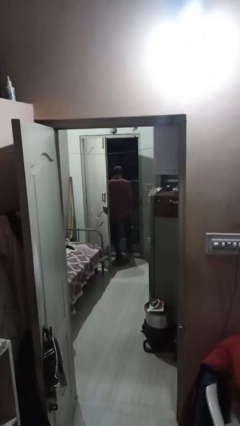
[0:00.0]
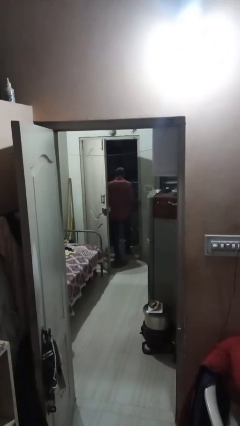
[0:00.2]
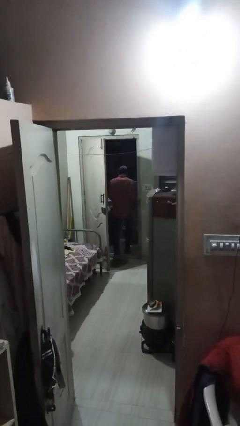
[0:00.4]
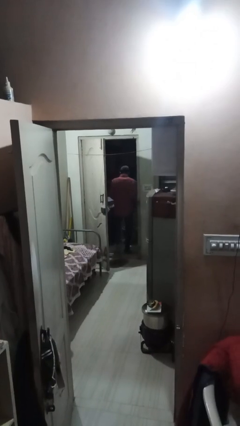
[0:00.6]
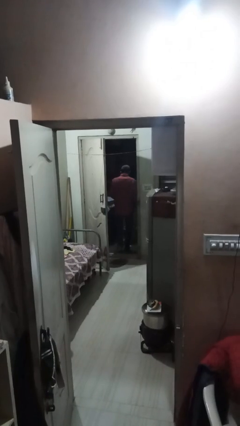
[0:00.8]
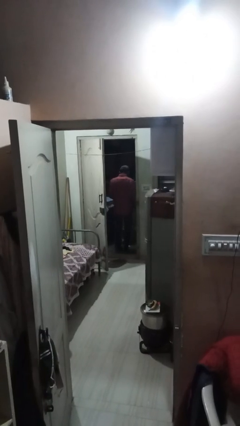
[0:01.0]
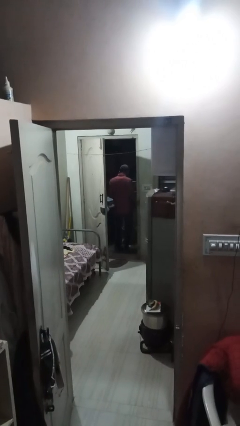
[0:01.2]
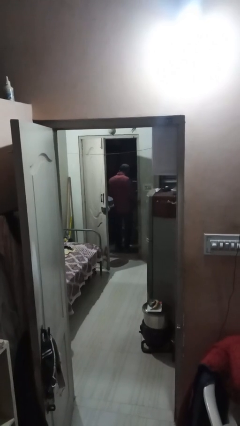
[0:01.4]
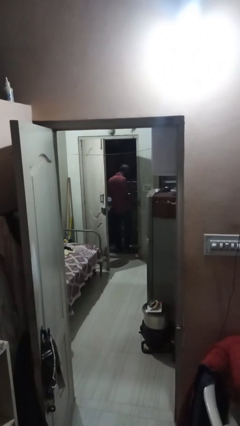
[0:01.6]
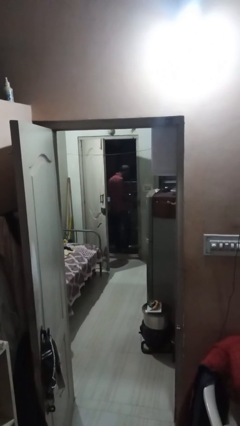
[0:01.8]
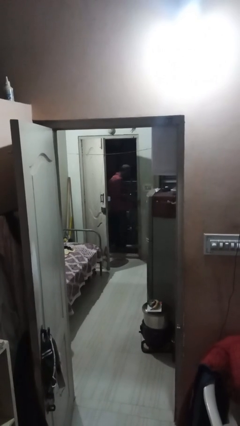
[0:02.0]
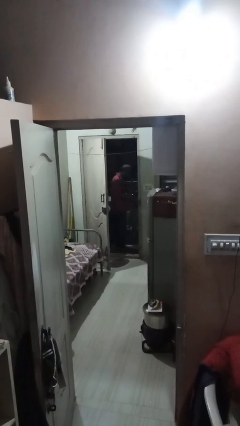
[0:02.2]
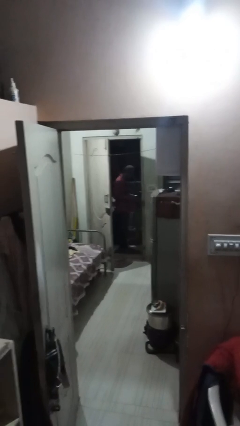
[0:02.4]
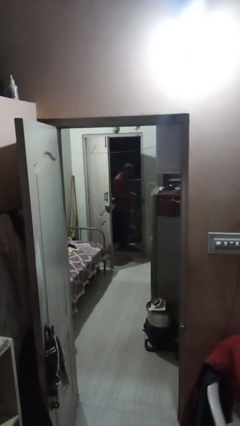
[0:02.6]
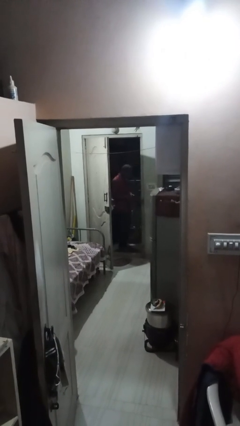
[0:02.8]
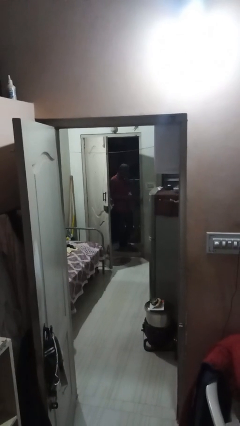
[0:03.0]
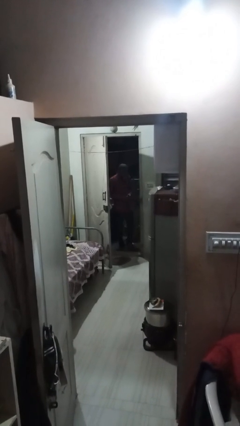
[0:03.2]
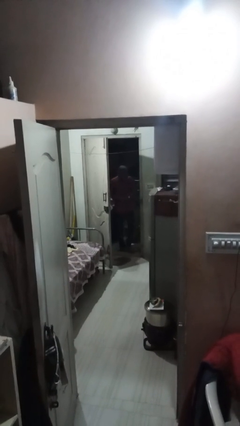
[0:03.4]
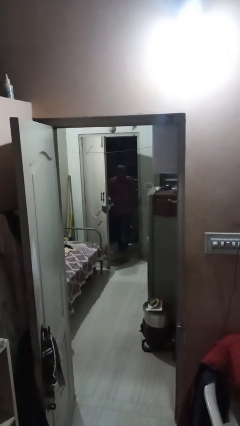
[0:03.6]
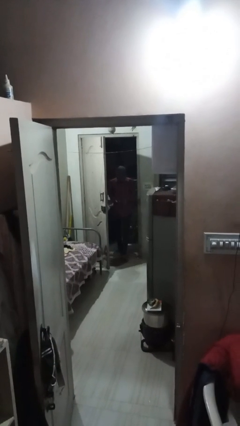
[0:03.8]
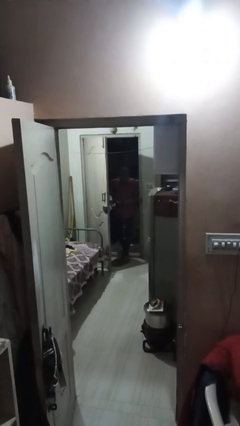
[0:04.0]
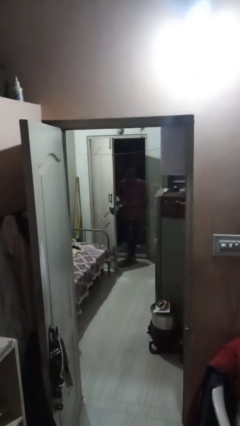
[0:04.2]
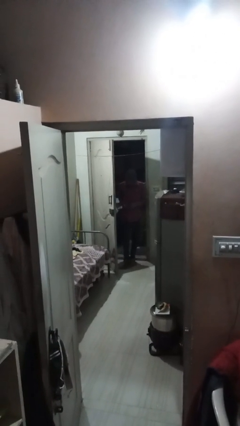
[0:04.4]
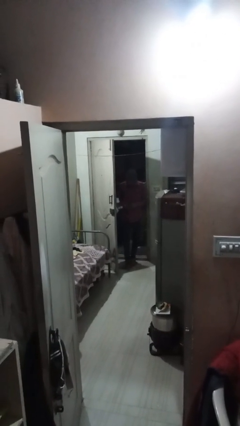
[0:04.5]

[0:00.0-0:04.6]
person exits scene through structure

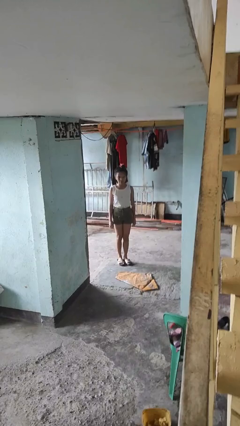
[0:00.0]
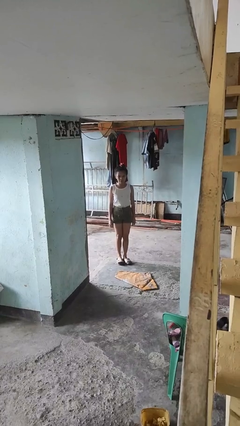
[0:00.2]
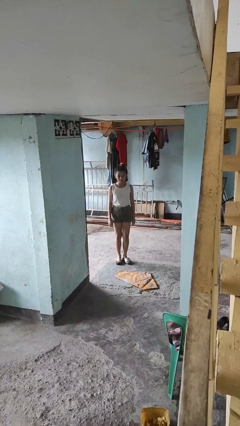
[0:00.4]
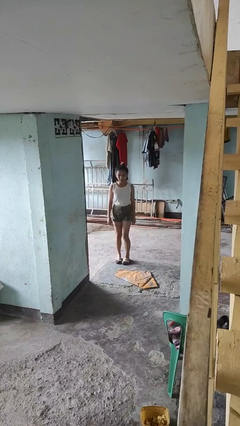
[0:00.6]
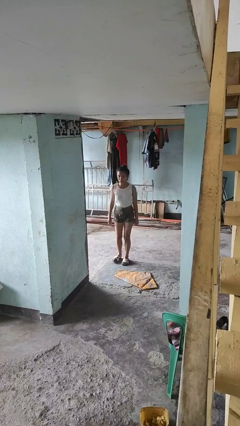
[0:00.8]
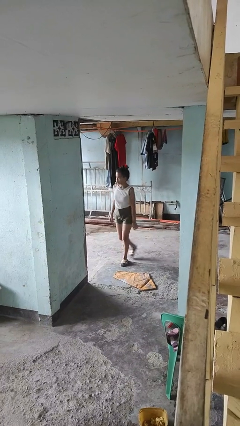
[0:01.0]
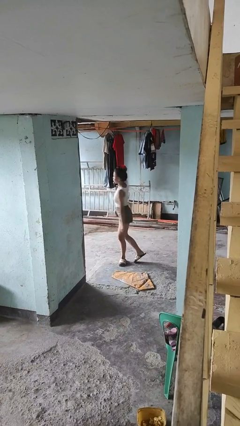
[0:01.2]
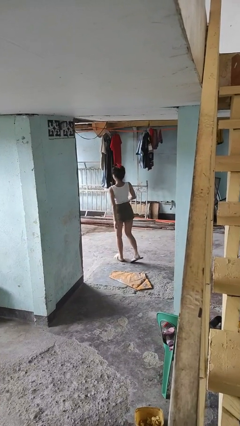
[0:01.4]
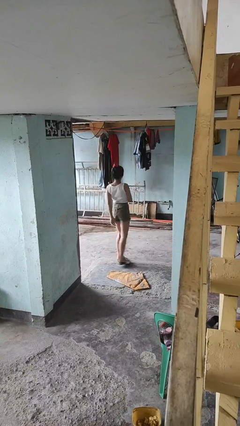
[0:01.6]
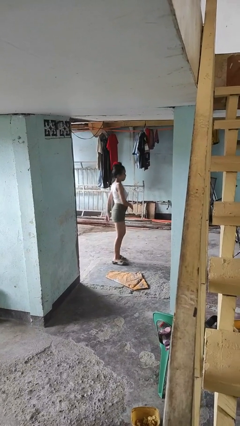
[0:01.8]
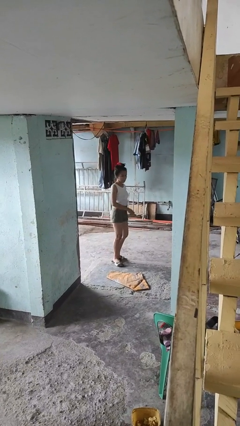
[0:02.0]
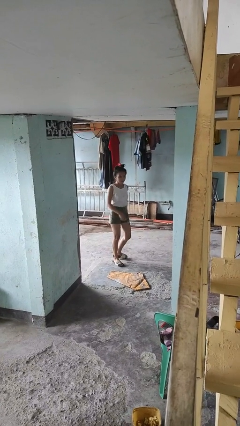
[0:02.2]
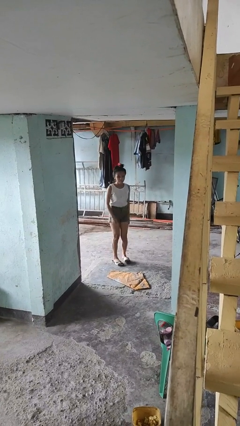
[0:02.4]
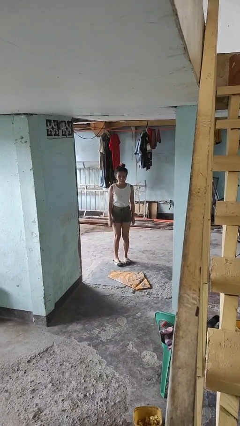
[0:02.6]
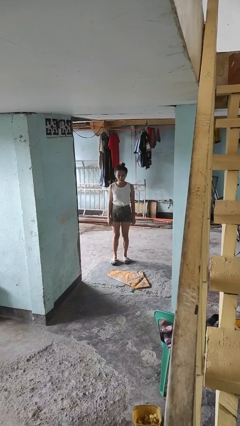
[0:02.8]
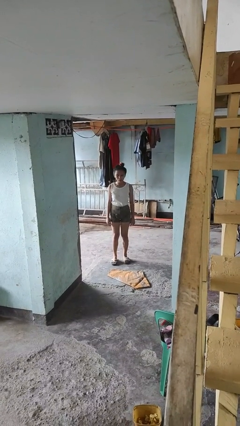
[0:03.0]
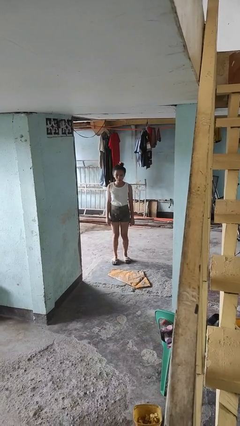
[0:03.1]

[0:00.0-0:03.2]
person twirls

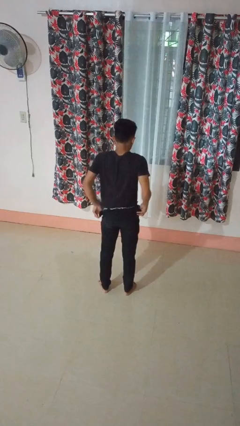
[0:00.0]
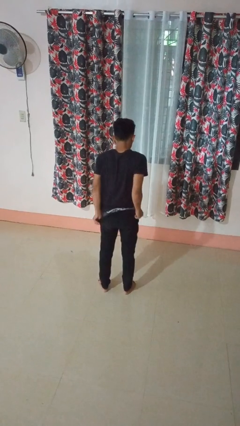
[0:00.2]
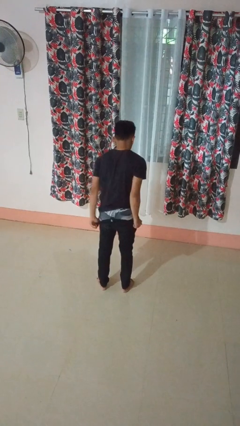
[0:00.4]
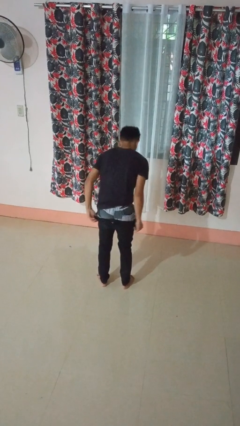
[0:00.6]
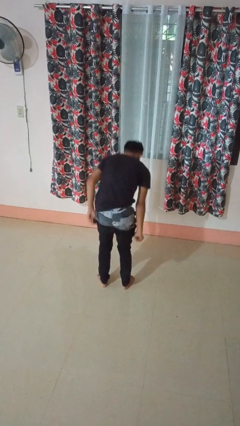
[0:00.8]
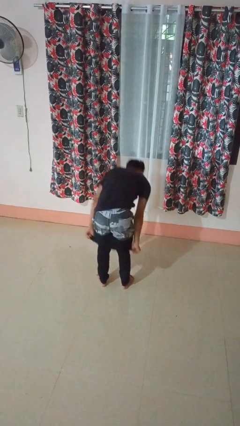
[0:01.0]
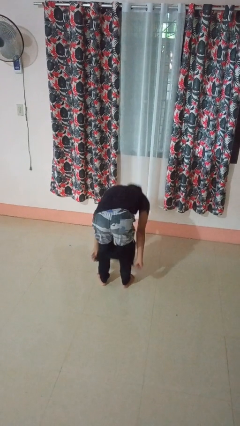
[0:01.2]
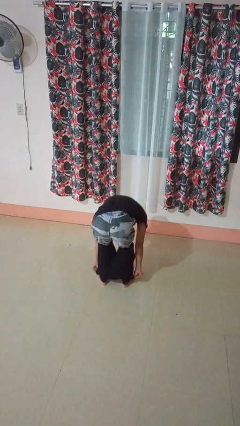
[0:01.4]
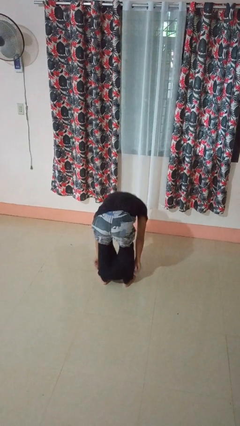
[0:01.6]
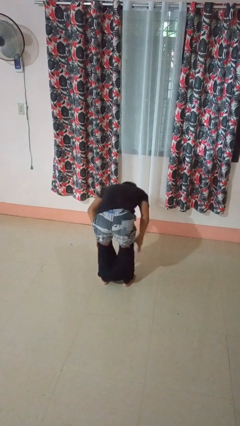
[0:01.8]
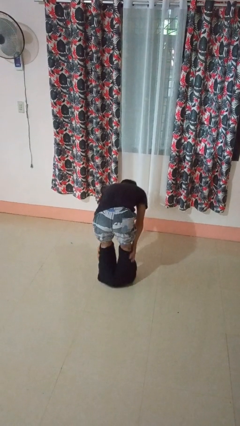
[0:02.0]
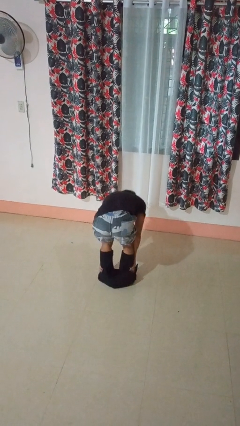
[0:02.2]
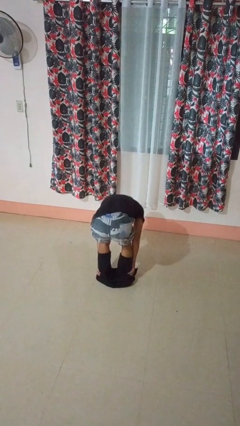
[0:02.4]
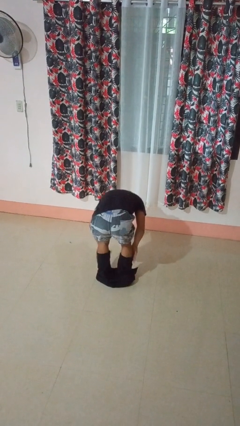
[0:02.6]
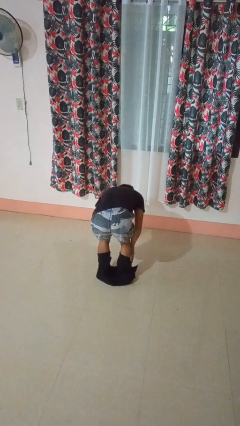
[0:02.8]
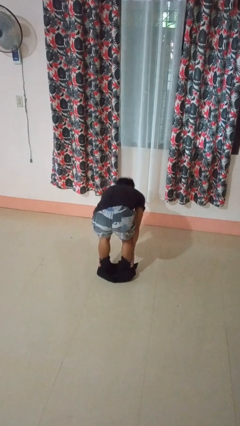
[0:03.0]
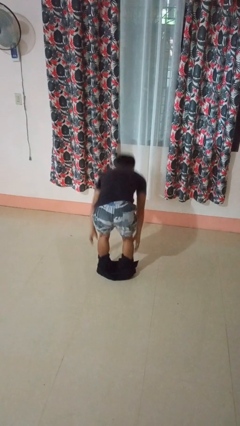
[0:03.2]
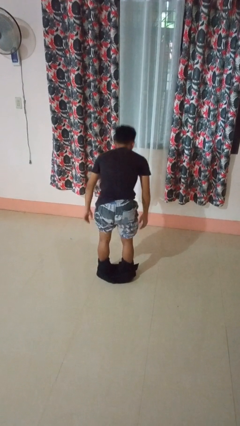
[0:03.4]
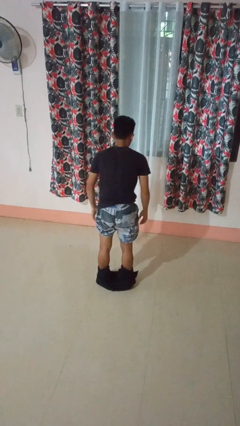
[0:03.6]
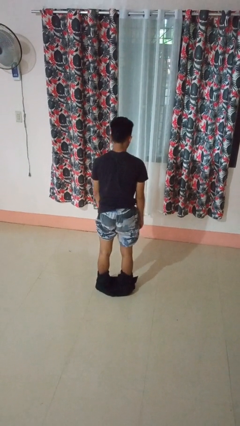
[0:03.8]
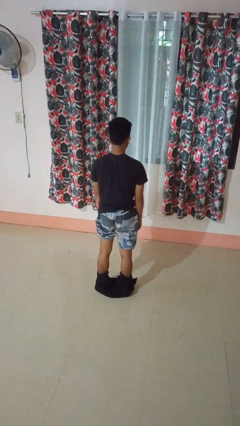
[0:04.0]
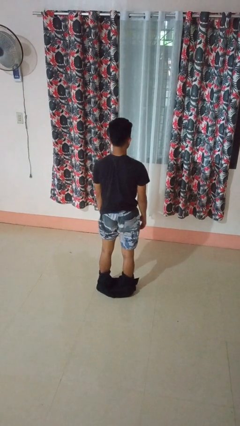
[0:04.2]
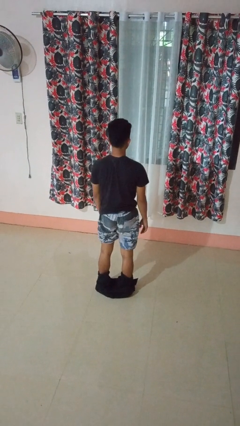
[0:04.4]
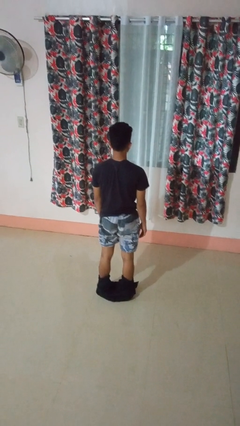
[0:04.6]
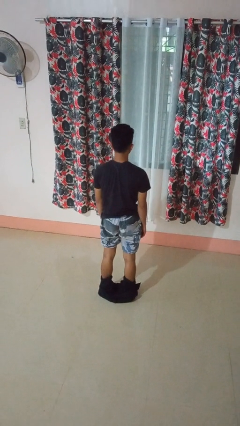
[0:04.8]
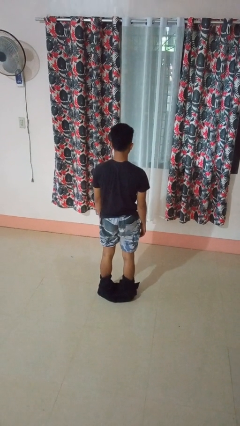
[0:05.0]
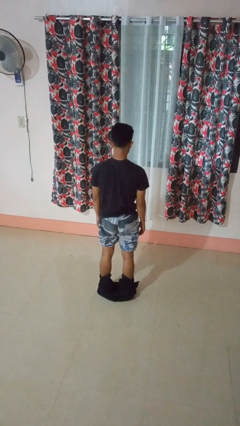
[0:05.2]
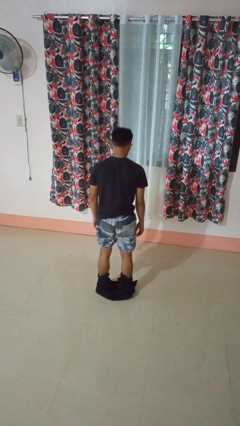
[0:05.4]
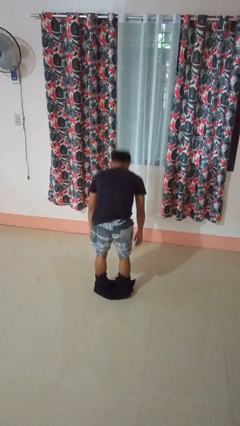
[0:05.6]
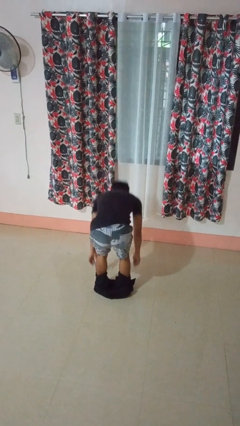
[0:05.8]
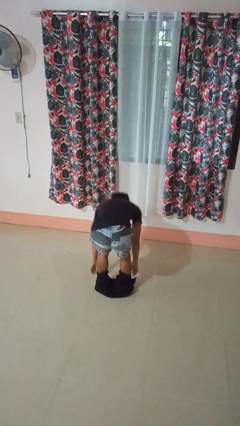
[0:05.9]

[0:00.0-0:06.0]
person takes off pants

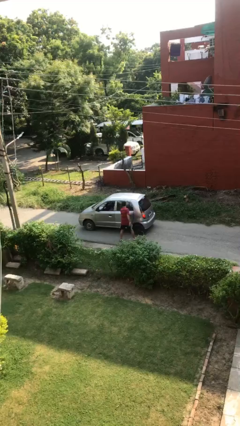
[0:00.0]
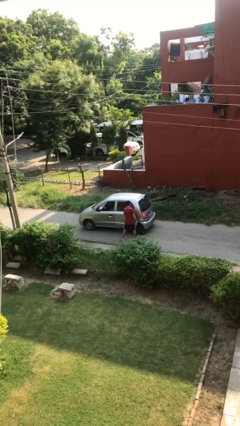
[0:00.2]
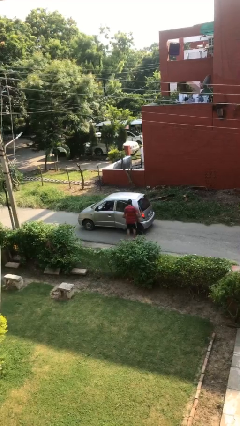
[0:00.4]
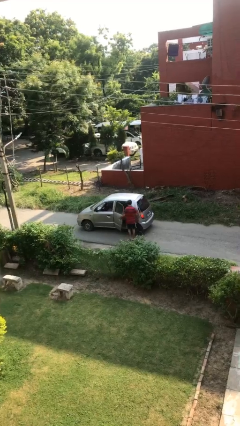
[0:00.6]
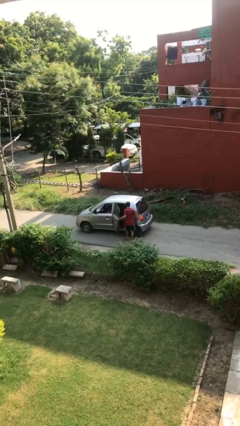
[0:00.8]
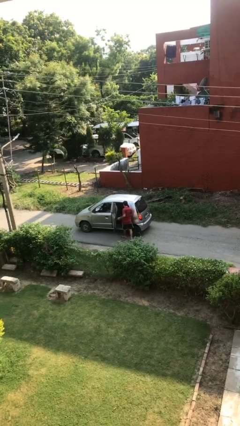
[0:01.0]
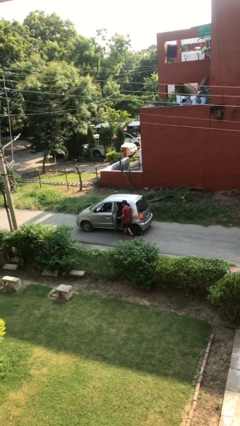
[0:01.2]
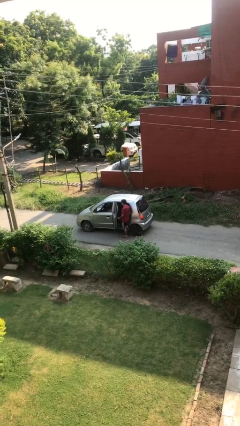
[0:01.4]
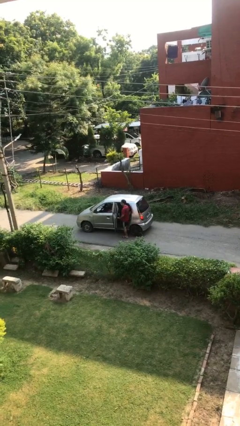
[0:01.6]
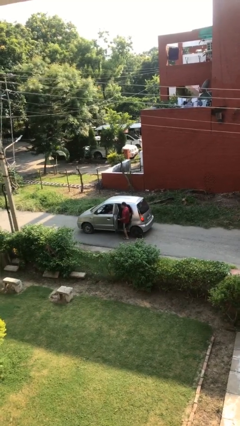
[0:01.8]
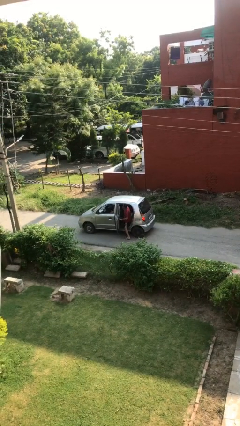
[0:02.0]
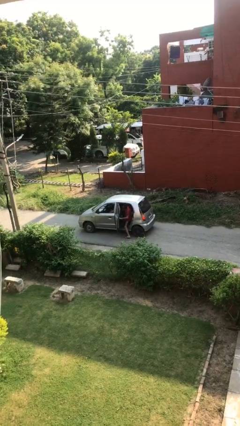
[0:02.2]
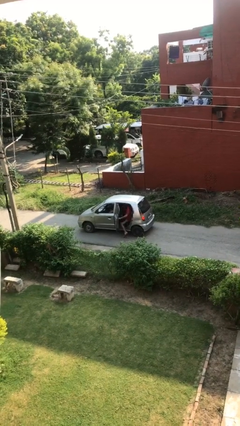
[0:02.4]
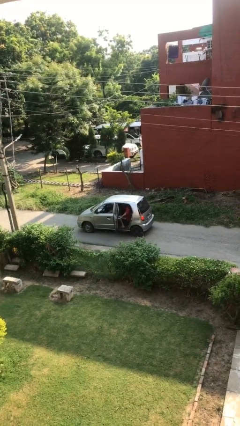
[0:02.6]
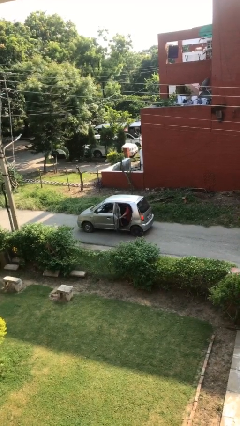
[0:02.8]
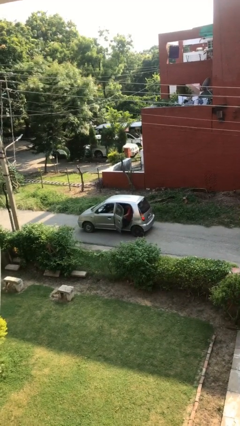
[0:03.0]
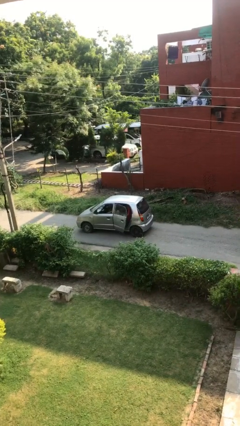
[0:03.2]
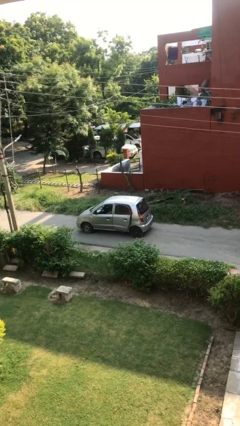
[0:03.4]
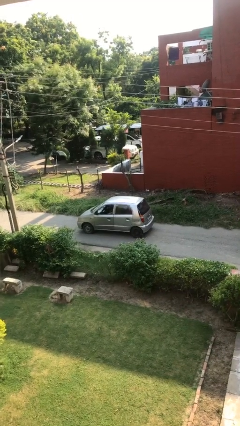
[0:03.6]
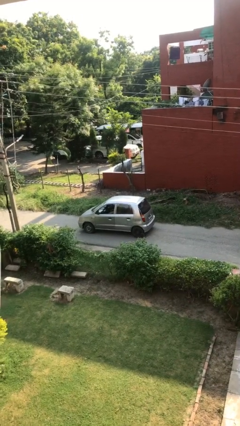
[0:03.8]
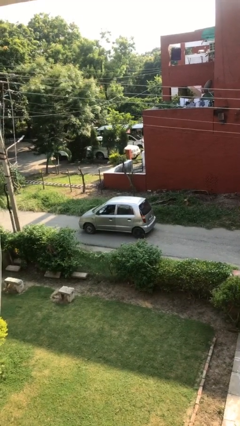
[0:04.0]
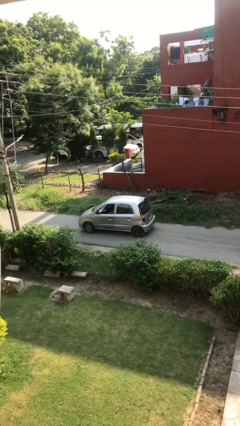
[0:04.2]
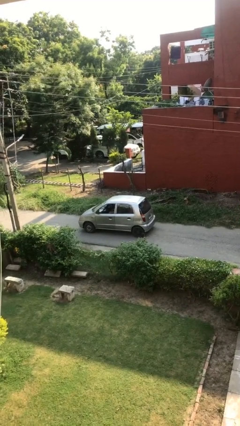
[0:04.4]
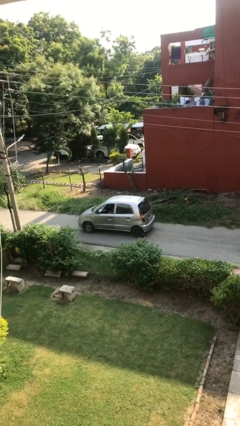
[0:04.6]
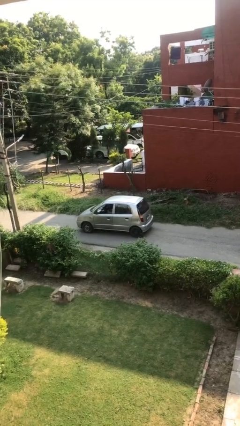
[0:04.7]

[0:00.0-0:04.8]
car picks up person
